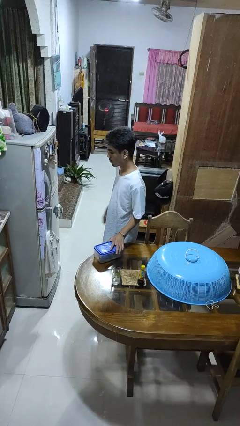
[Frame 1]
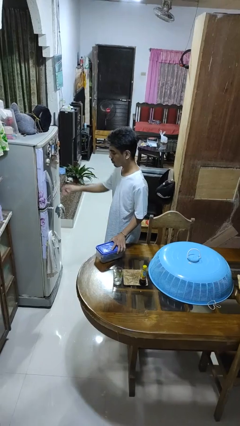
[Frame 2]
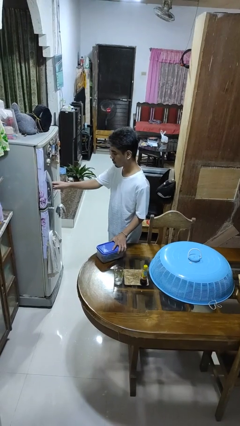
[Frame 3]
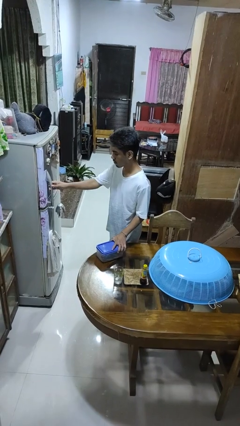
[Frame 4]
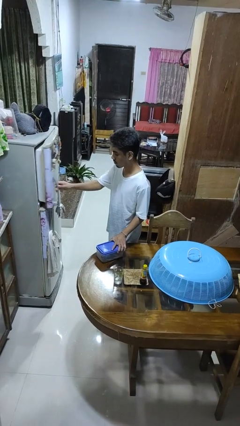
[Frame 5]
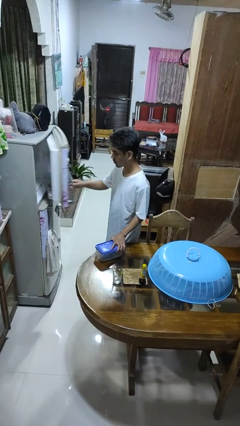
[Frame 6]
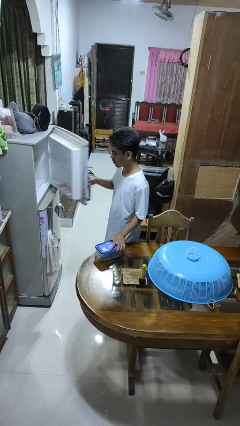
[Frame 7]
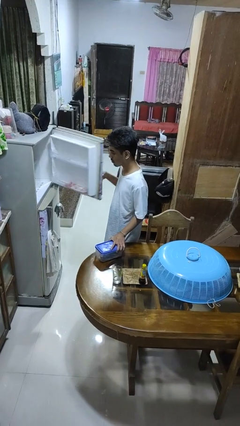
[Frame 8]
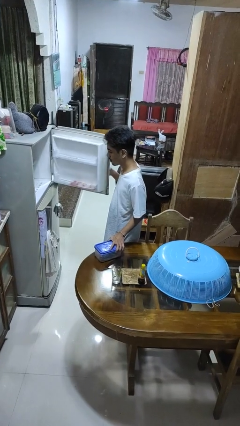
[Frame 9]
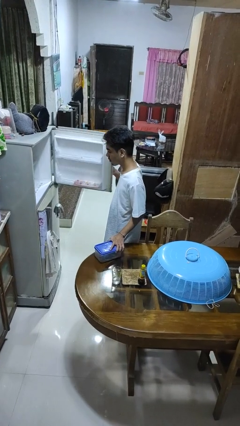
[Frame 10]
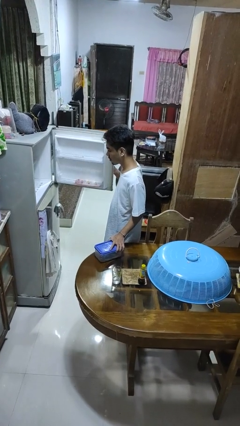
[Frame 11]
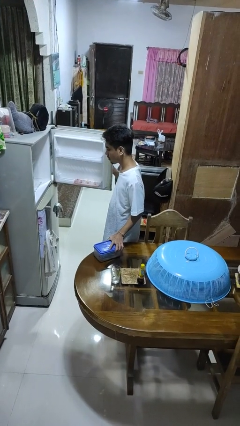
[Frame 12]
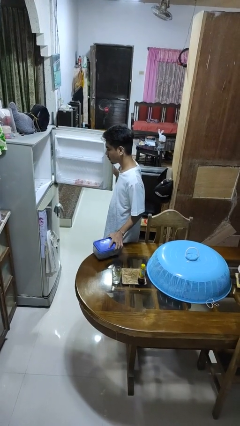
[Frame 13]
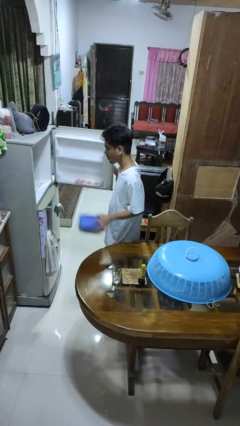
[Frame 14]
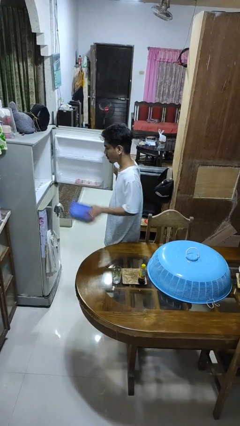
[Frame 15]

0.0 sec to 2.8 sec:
person opens refrigerator

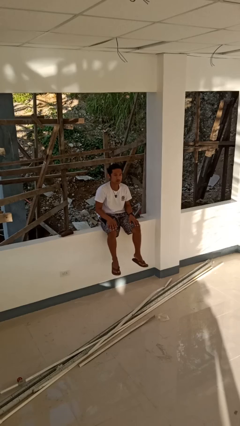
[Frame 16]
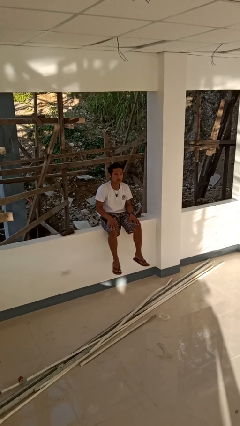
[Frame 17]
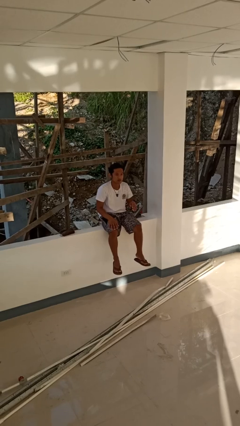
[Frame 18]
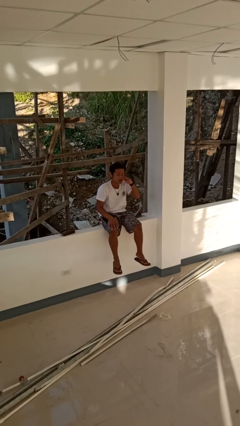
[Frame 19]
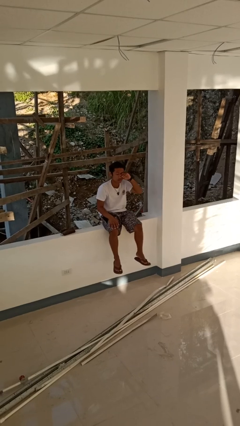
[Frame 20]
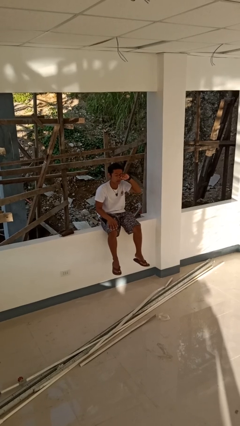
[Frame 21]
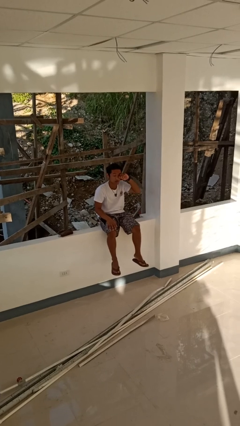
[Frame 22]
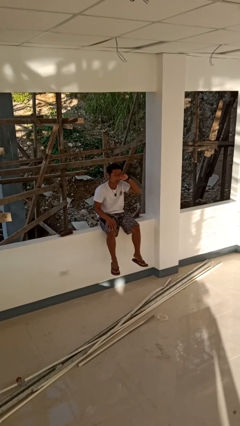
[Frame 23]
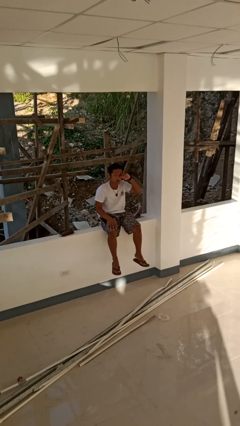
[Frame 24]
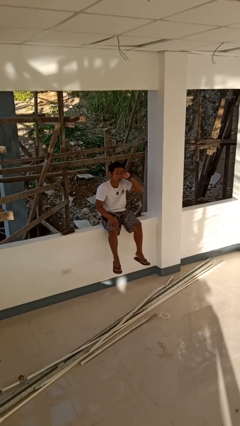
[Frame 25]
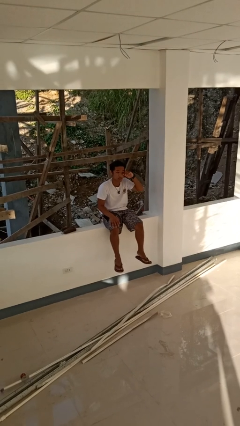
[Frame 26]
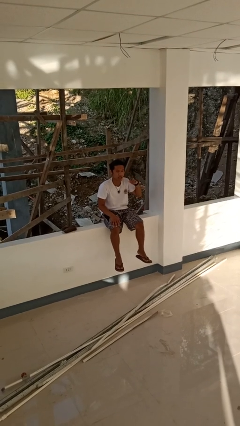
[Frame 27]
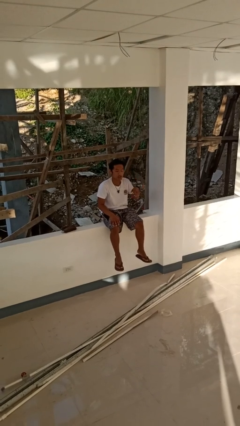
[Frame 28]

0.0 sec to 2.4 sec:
person rubs eyes

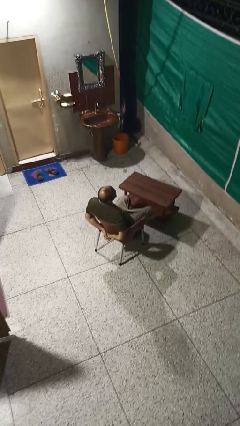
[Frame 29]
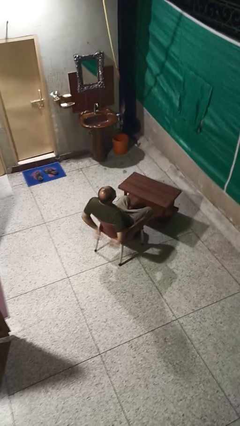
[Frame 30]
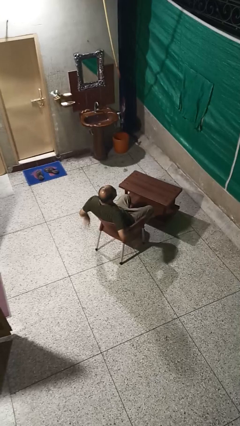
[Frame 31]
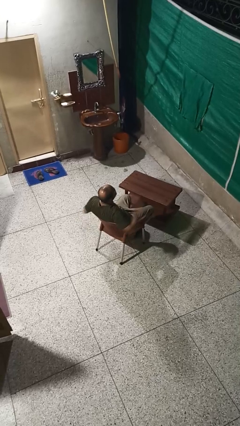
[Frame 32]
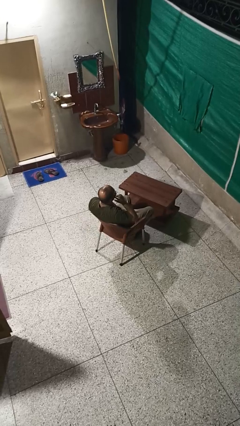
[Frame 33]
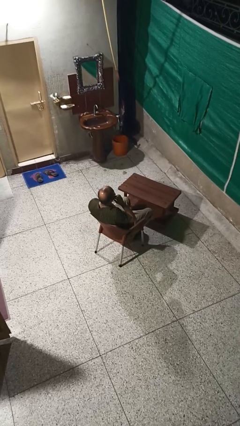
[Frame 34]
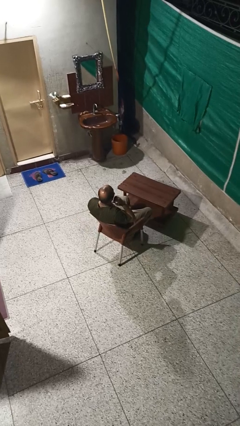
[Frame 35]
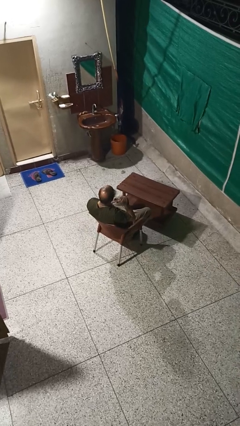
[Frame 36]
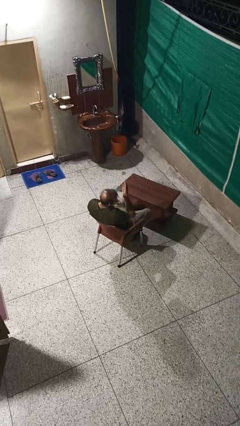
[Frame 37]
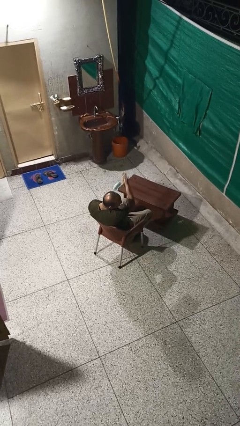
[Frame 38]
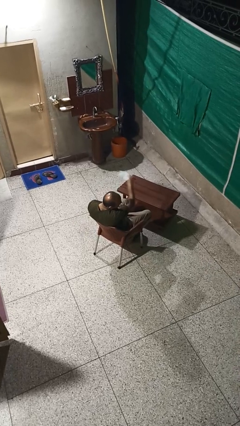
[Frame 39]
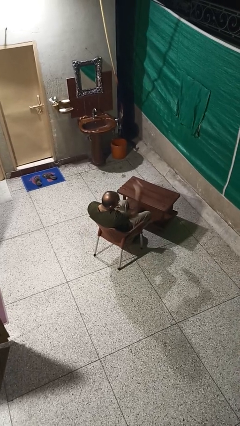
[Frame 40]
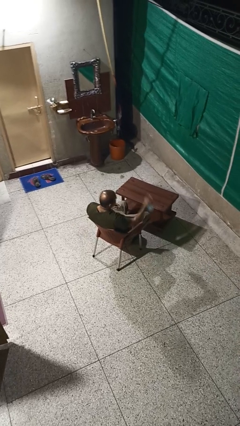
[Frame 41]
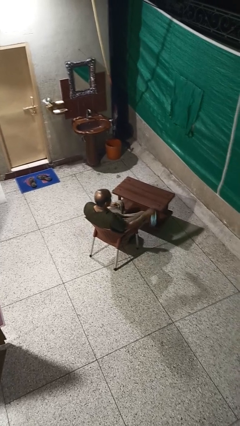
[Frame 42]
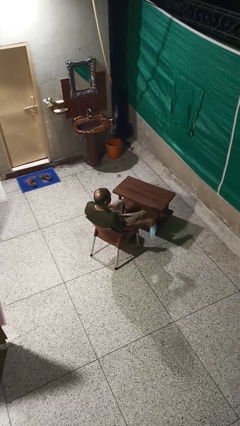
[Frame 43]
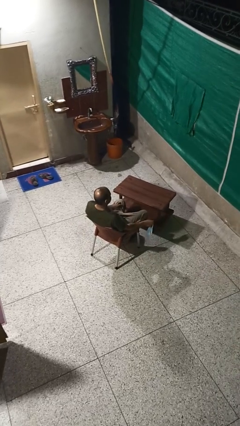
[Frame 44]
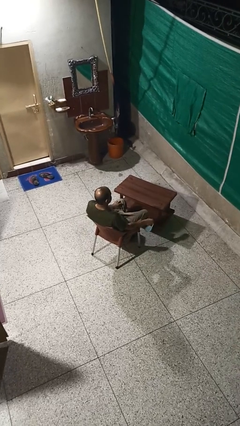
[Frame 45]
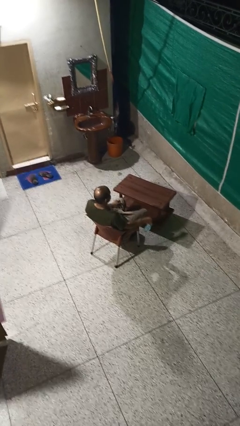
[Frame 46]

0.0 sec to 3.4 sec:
person takes off facemask

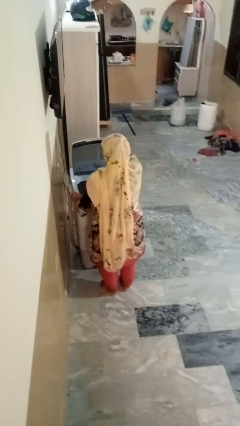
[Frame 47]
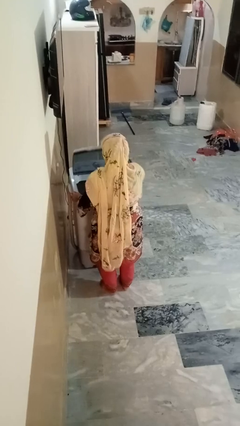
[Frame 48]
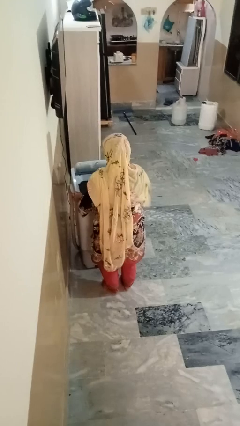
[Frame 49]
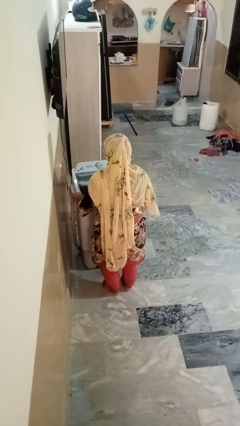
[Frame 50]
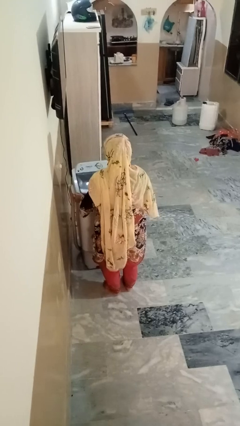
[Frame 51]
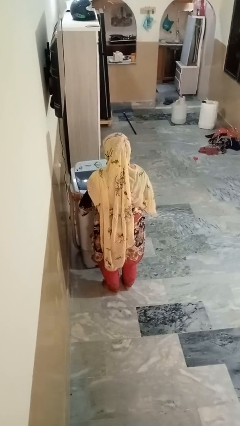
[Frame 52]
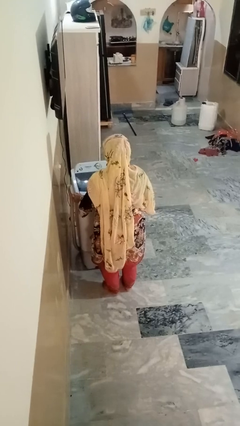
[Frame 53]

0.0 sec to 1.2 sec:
person closes clothes washer

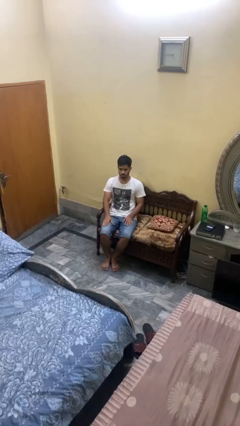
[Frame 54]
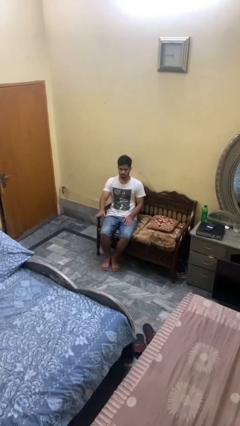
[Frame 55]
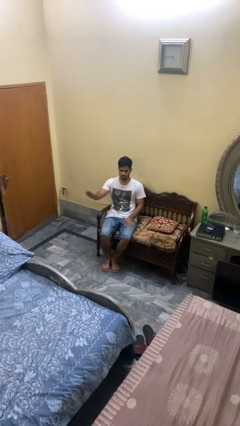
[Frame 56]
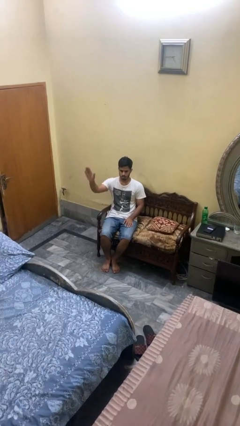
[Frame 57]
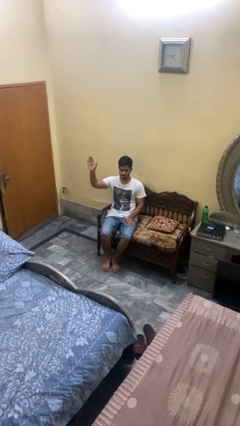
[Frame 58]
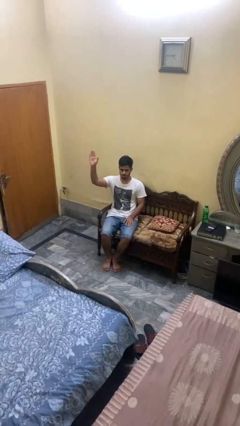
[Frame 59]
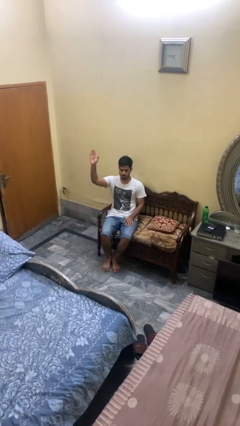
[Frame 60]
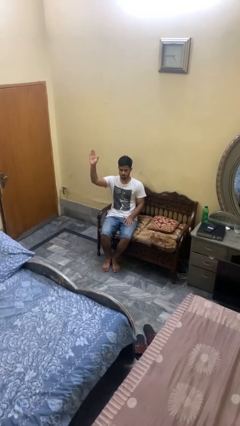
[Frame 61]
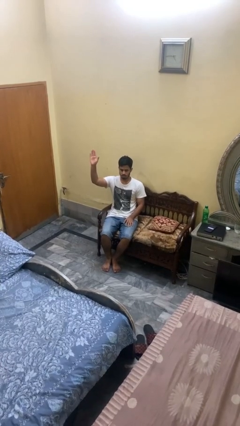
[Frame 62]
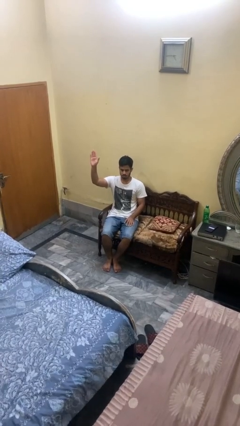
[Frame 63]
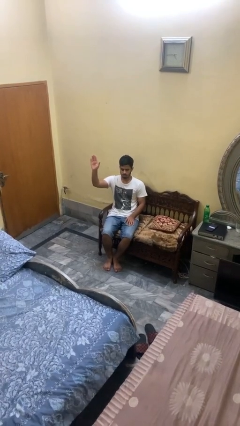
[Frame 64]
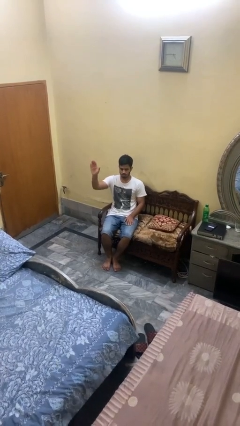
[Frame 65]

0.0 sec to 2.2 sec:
person gestures raise hand

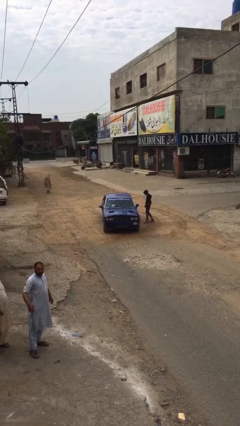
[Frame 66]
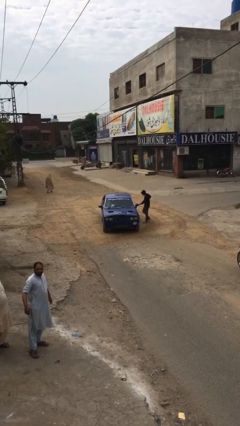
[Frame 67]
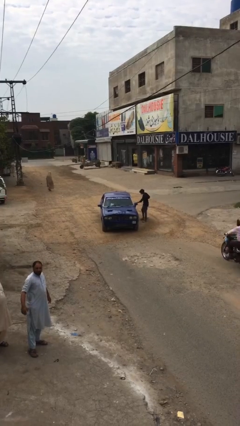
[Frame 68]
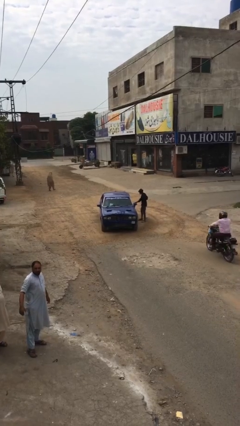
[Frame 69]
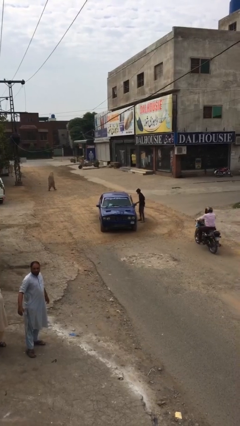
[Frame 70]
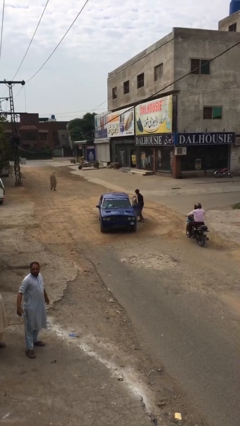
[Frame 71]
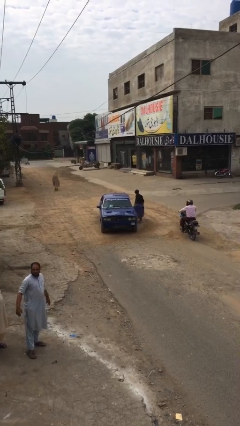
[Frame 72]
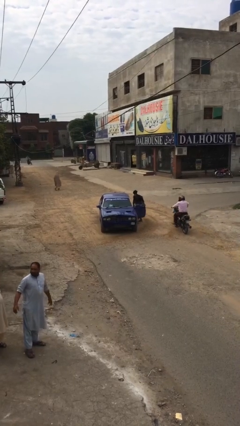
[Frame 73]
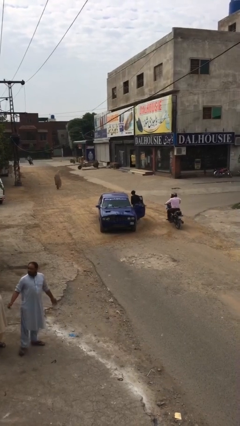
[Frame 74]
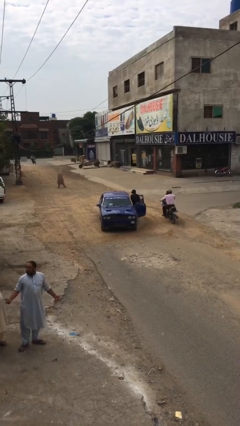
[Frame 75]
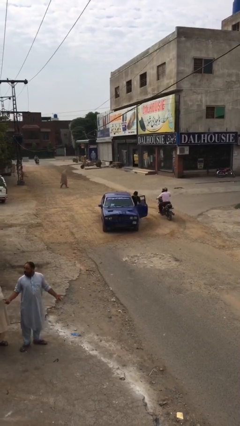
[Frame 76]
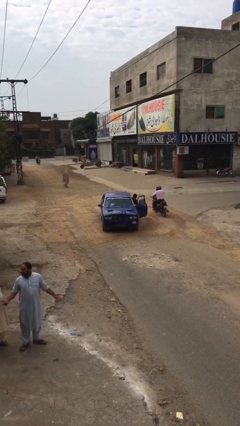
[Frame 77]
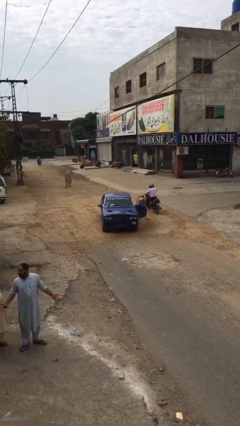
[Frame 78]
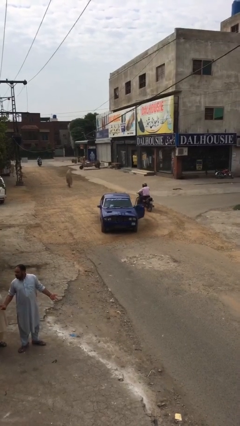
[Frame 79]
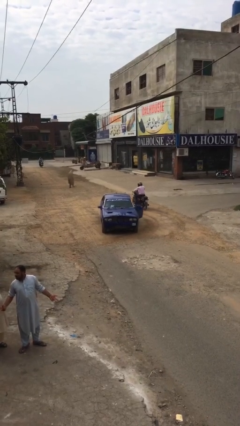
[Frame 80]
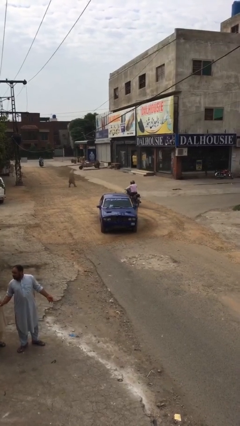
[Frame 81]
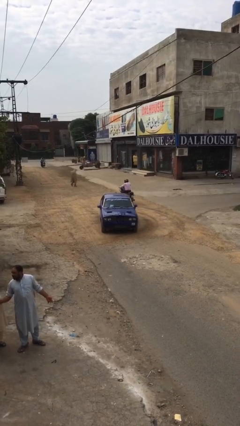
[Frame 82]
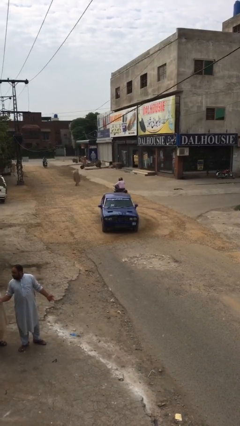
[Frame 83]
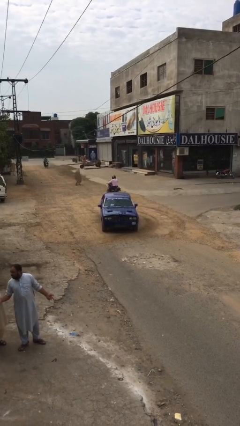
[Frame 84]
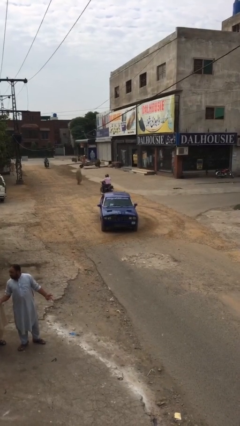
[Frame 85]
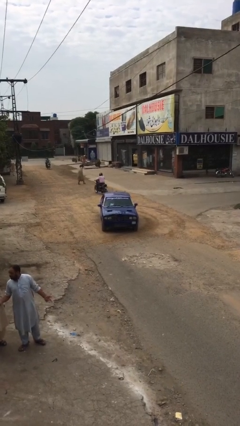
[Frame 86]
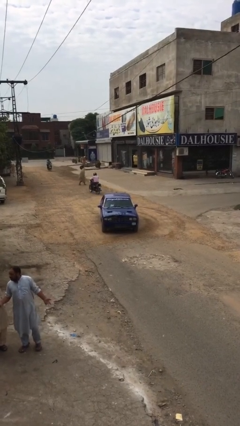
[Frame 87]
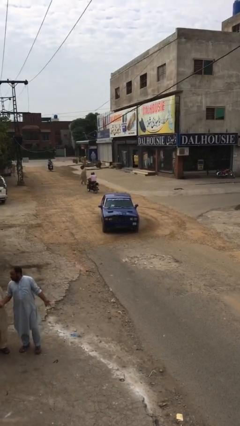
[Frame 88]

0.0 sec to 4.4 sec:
car picks up person

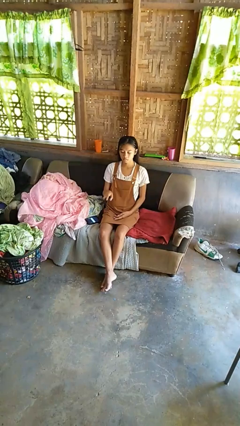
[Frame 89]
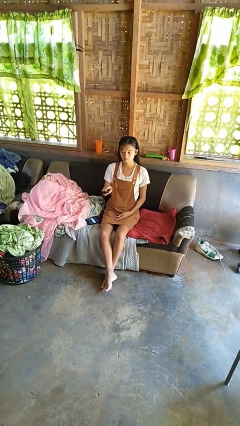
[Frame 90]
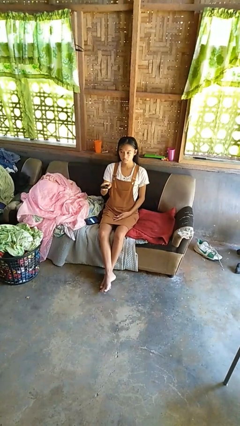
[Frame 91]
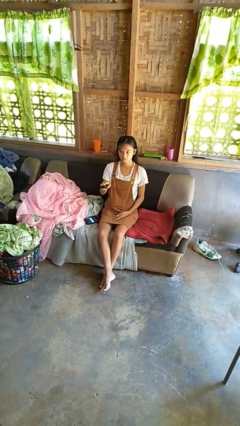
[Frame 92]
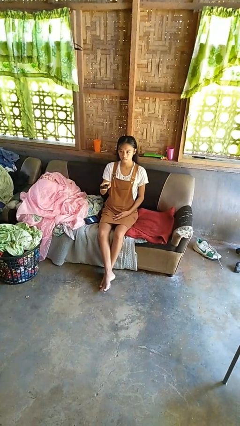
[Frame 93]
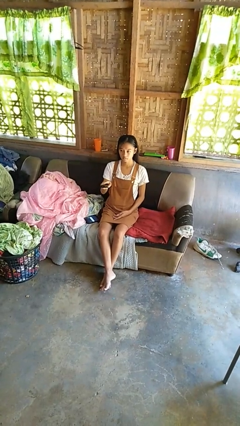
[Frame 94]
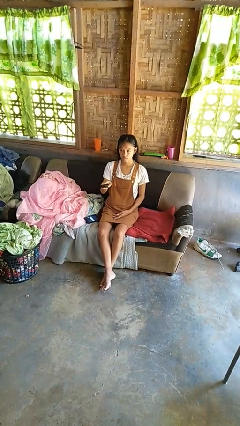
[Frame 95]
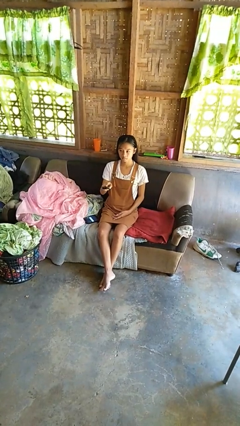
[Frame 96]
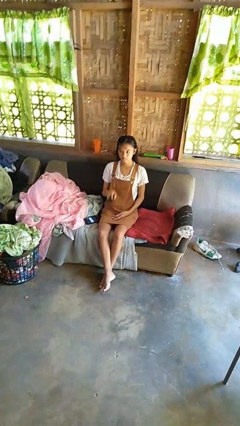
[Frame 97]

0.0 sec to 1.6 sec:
person uses television remote
